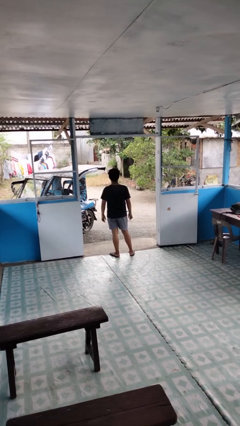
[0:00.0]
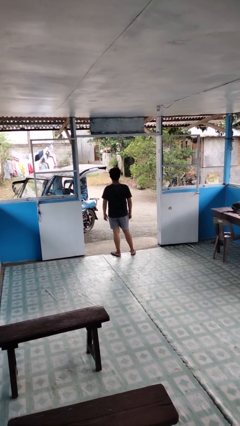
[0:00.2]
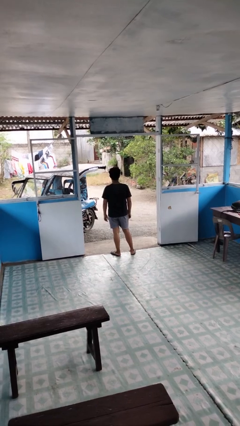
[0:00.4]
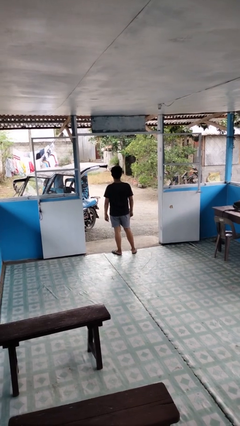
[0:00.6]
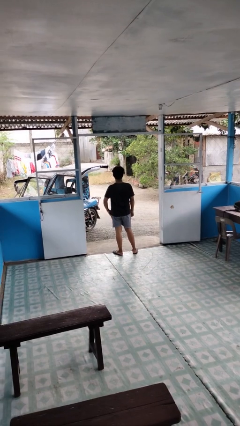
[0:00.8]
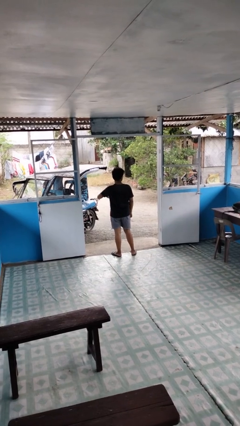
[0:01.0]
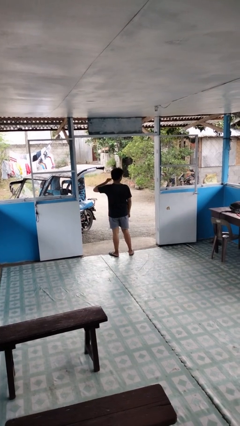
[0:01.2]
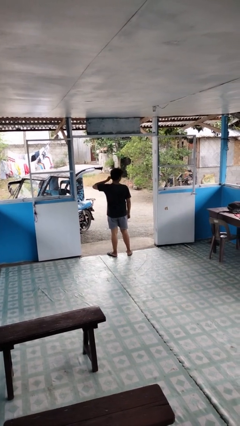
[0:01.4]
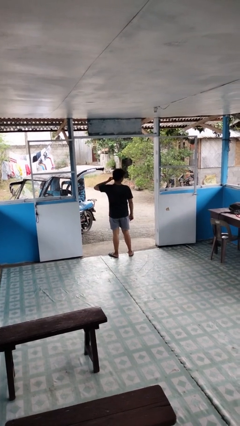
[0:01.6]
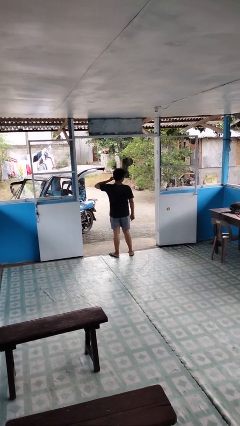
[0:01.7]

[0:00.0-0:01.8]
person touches earlobe

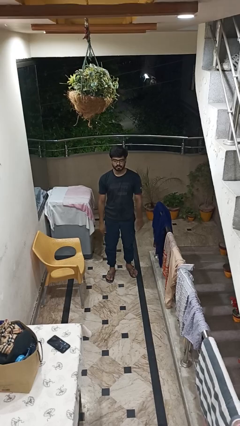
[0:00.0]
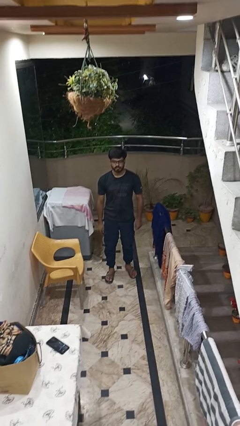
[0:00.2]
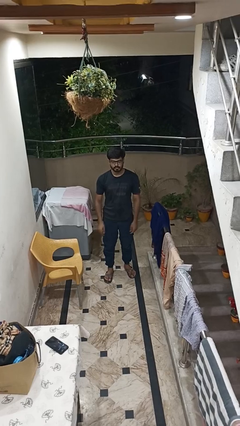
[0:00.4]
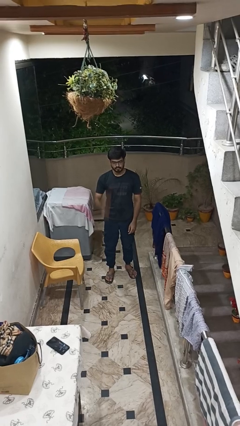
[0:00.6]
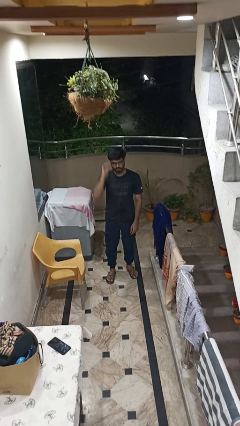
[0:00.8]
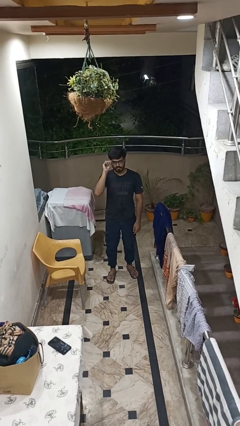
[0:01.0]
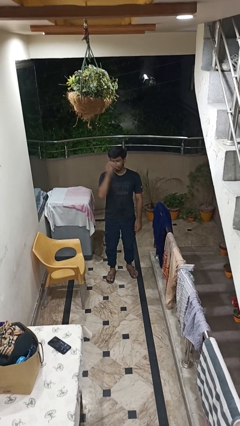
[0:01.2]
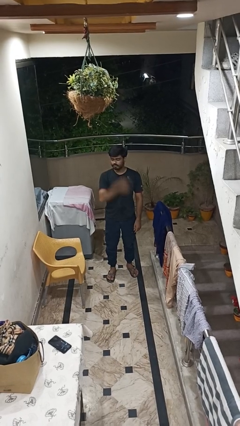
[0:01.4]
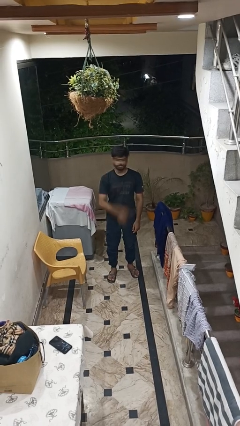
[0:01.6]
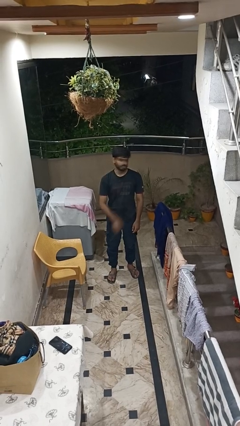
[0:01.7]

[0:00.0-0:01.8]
person takes off glasses

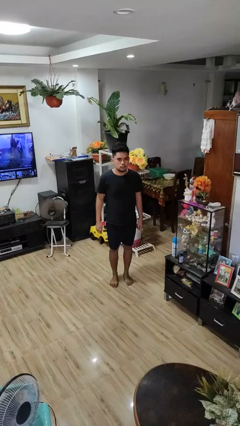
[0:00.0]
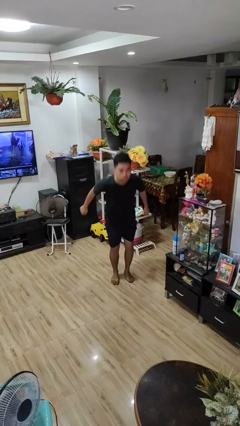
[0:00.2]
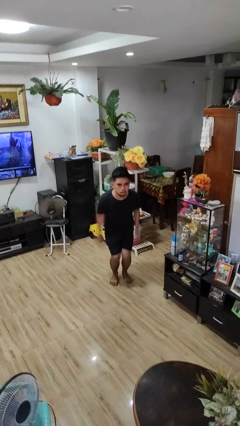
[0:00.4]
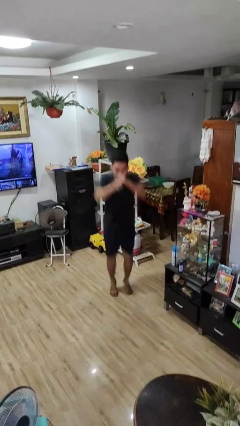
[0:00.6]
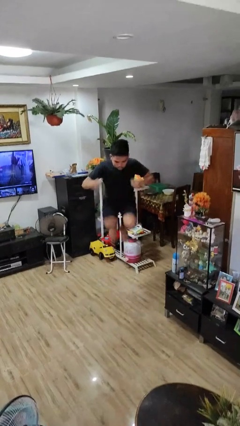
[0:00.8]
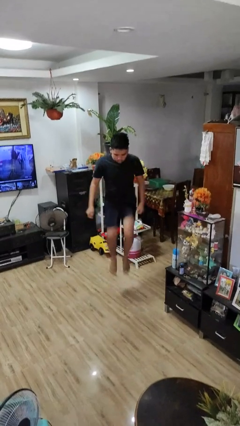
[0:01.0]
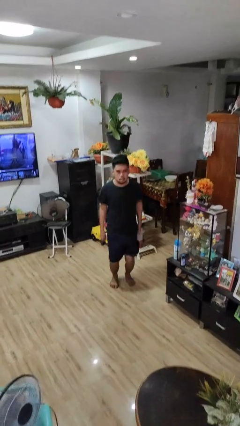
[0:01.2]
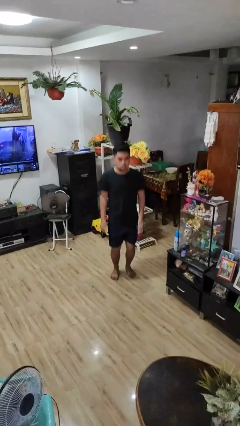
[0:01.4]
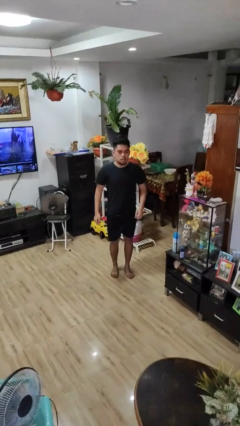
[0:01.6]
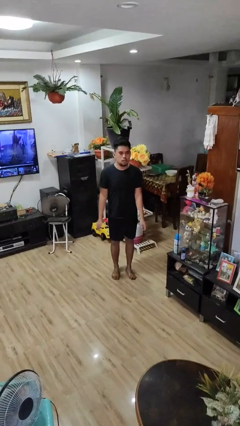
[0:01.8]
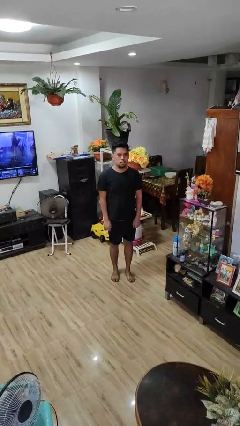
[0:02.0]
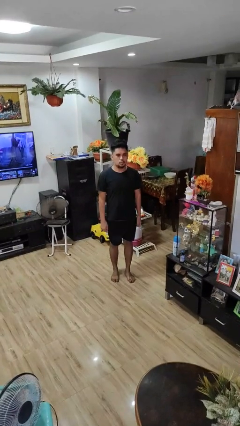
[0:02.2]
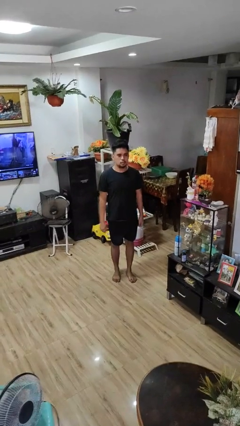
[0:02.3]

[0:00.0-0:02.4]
person jumps

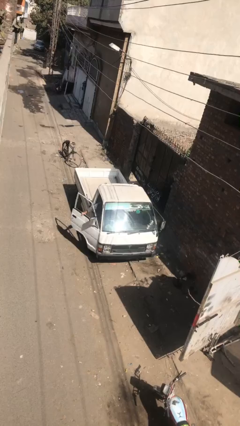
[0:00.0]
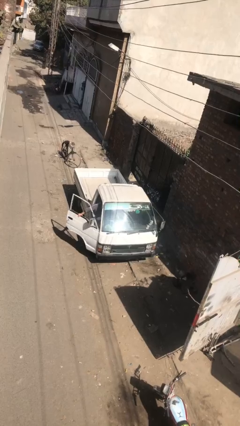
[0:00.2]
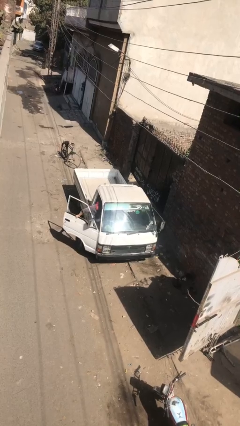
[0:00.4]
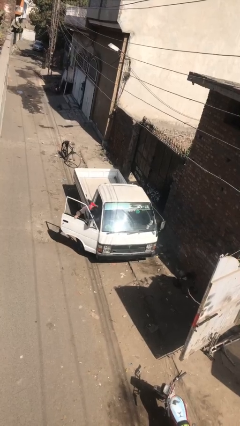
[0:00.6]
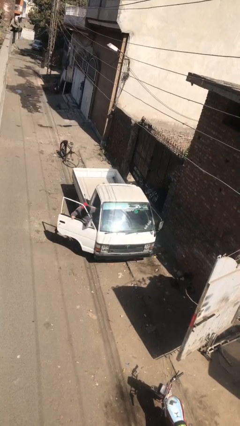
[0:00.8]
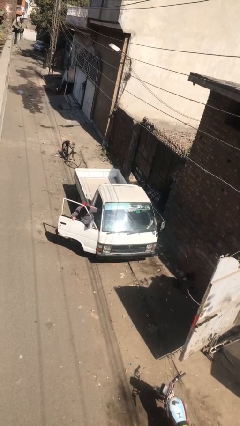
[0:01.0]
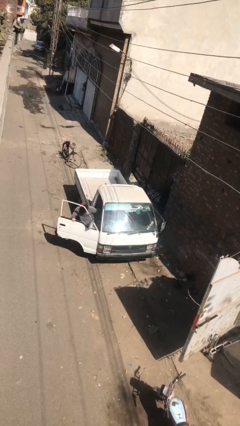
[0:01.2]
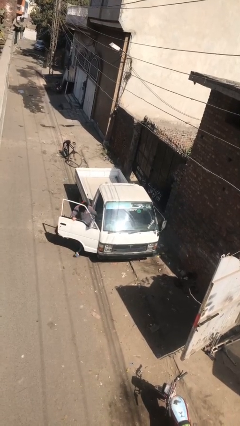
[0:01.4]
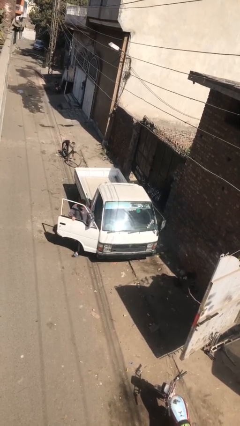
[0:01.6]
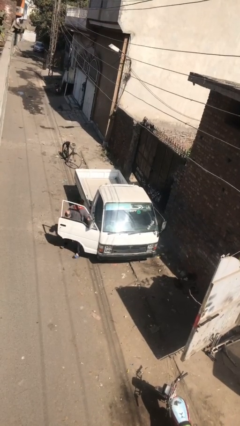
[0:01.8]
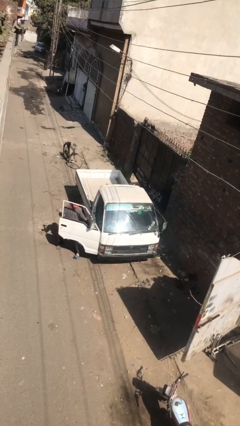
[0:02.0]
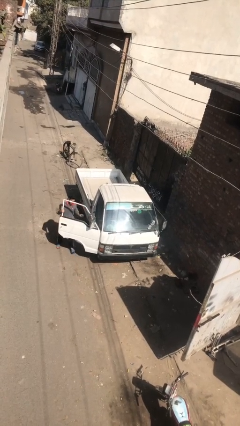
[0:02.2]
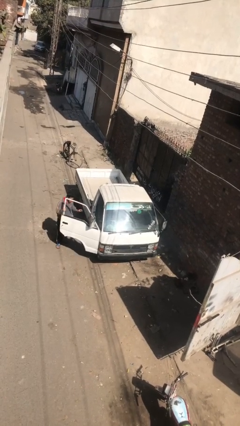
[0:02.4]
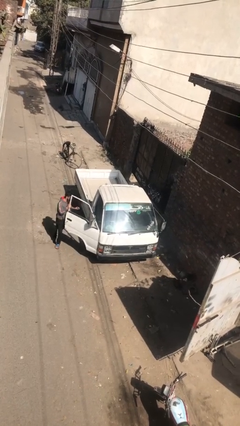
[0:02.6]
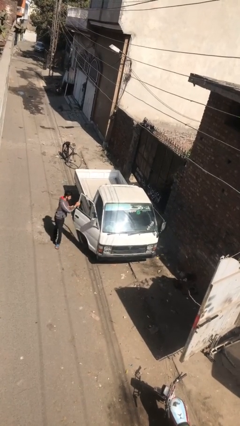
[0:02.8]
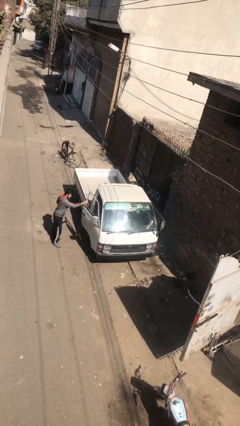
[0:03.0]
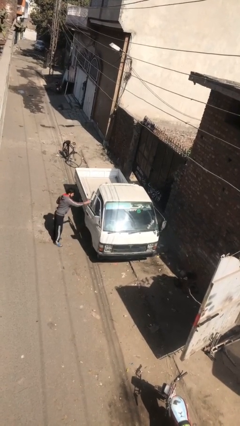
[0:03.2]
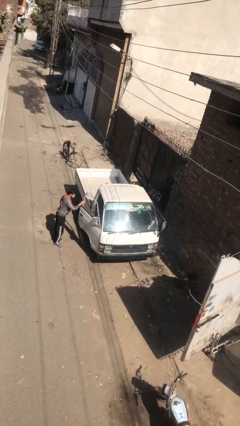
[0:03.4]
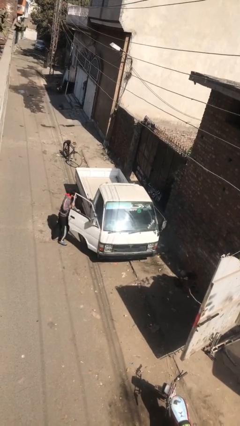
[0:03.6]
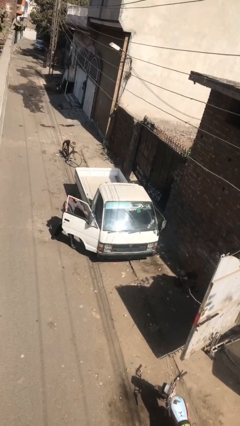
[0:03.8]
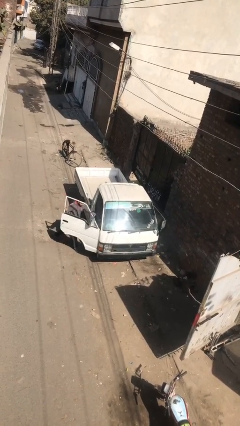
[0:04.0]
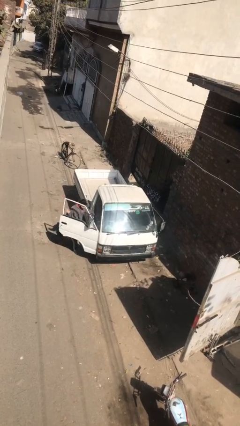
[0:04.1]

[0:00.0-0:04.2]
car drops off person

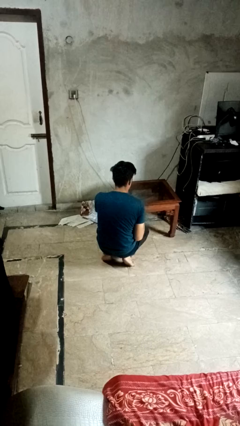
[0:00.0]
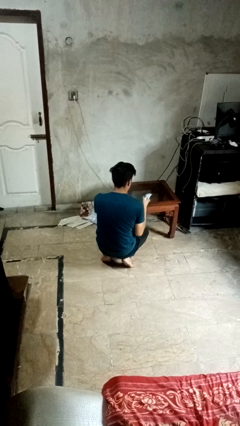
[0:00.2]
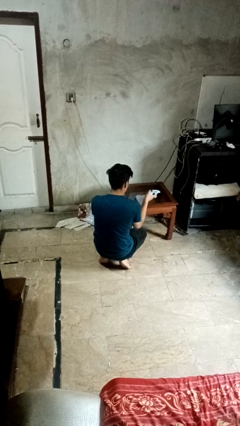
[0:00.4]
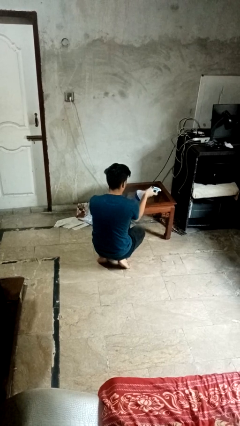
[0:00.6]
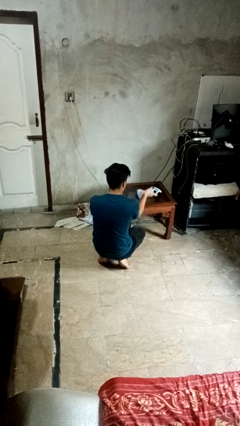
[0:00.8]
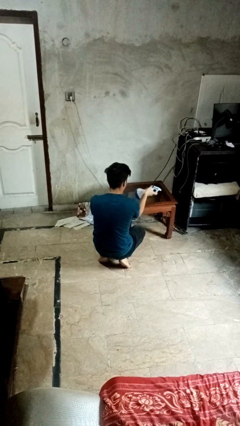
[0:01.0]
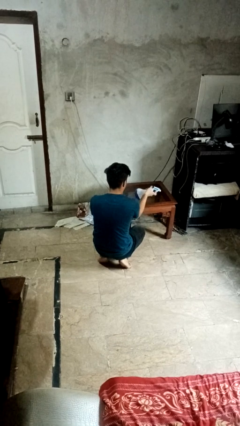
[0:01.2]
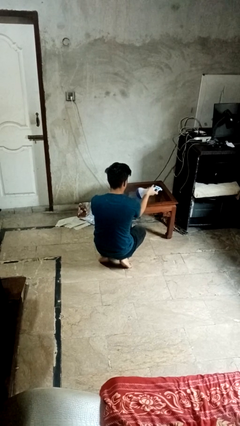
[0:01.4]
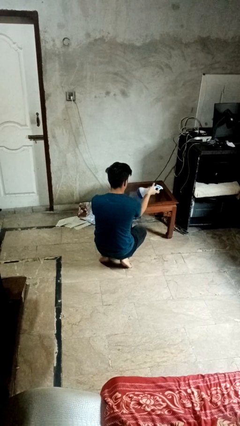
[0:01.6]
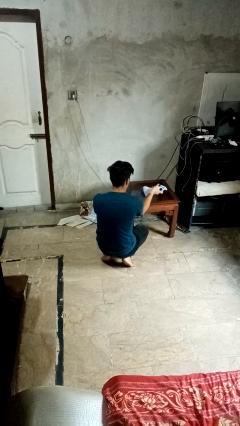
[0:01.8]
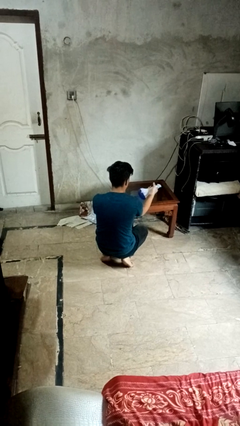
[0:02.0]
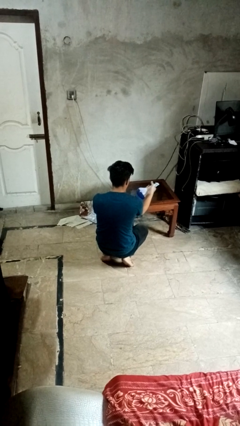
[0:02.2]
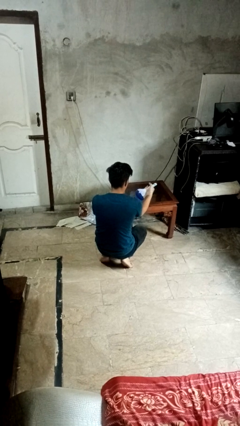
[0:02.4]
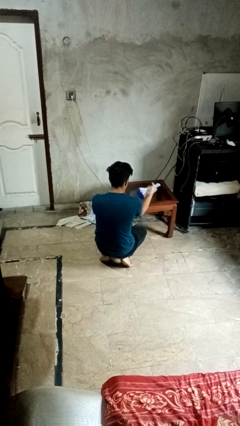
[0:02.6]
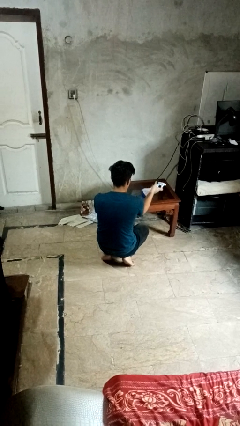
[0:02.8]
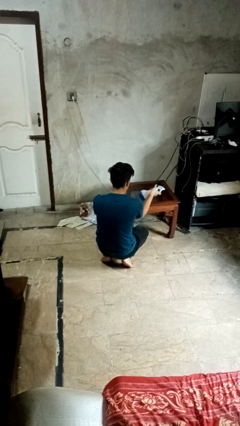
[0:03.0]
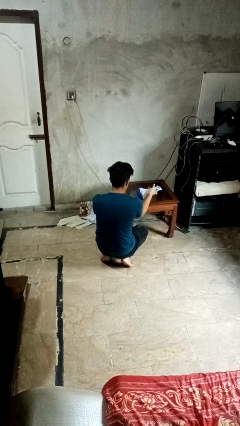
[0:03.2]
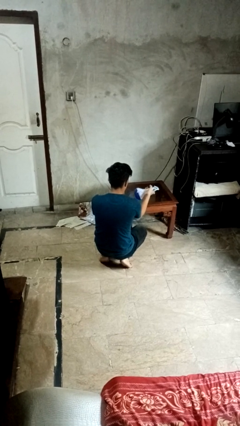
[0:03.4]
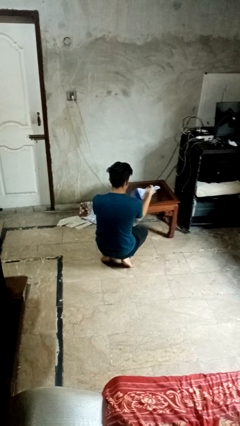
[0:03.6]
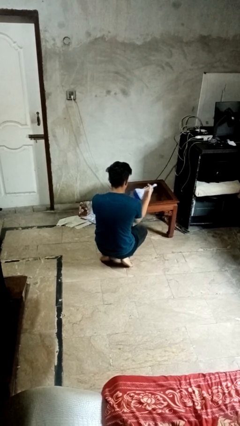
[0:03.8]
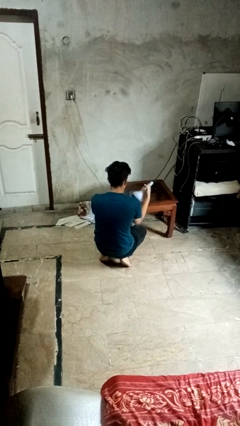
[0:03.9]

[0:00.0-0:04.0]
person sprays from bottle

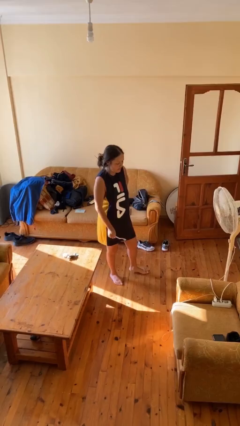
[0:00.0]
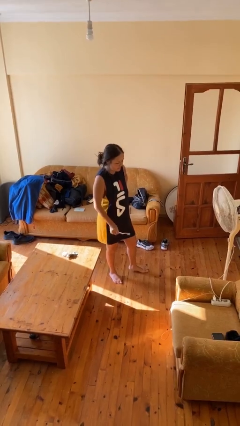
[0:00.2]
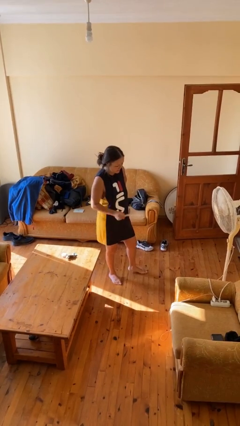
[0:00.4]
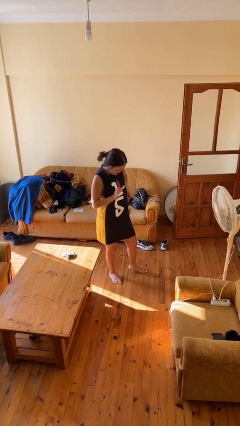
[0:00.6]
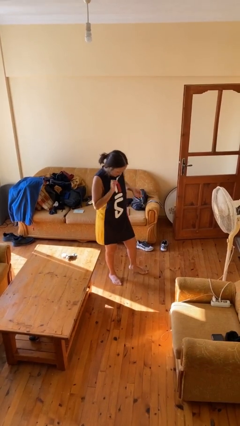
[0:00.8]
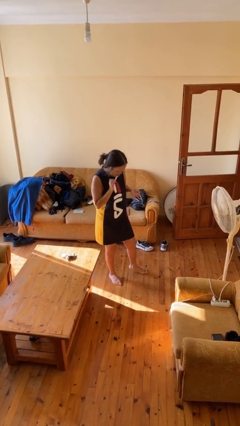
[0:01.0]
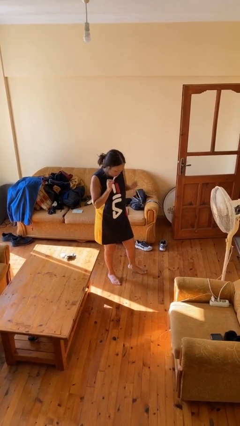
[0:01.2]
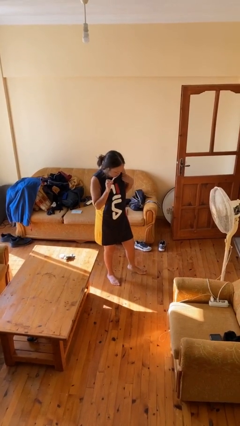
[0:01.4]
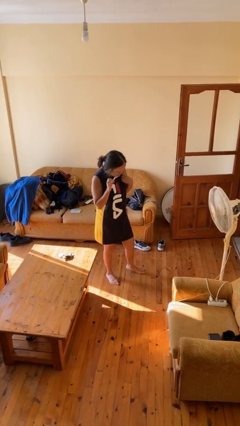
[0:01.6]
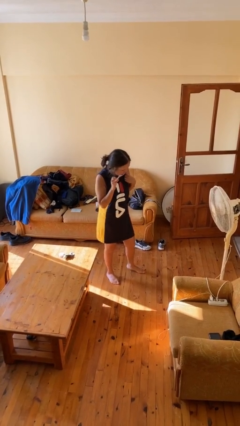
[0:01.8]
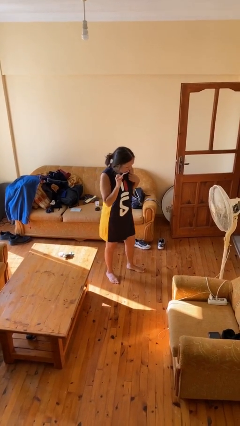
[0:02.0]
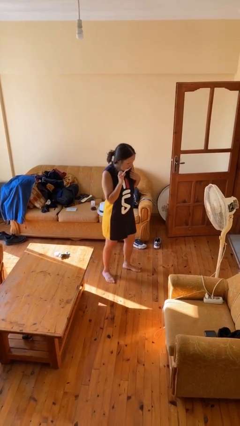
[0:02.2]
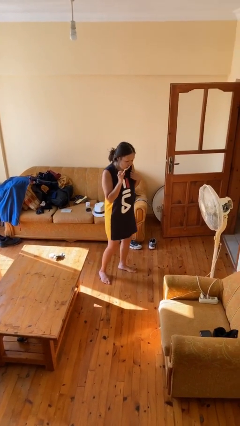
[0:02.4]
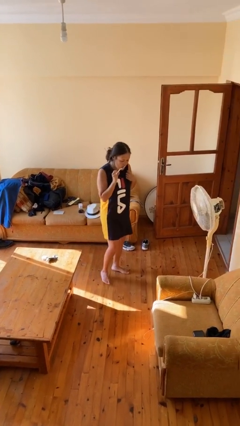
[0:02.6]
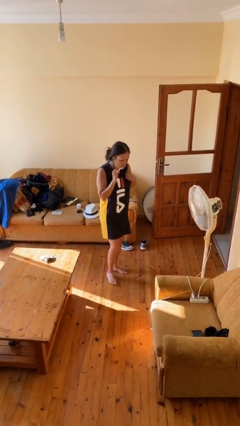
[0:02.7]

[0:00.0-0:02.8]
person brushes teeth

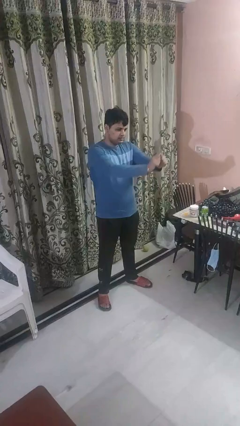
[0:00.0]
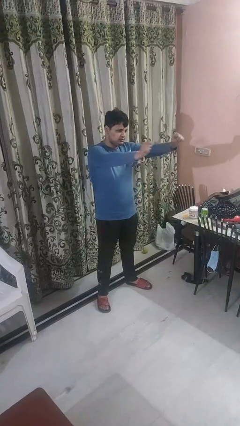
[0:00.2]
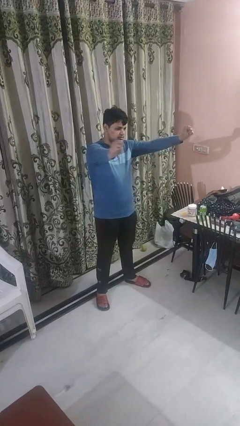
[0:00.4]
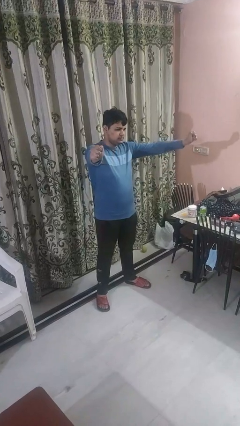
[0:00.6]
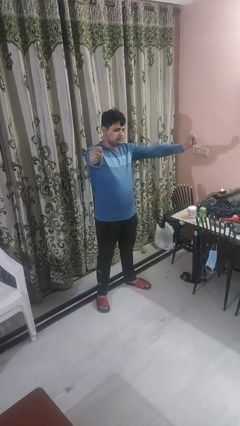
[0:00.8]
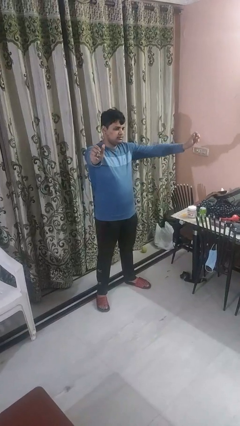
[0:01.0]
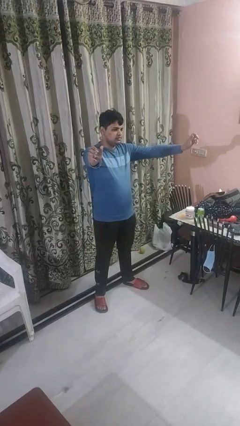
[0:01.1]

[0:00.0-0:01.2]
person gestures zoom in
